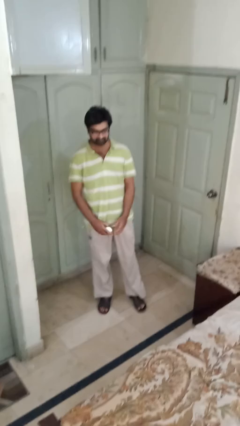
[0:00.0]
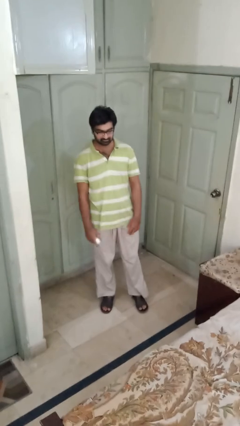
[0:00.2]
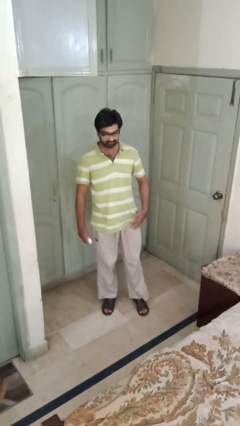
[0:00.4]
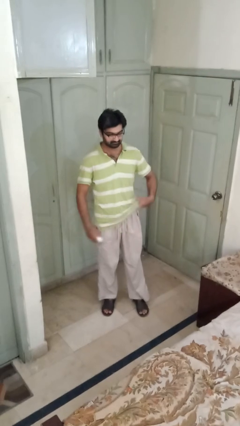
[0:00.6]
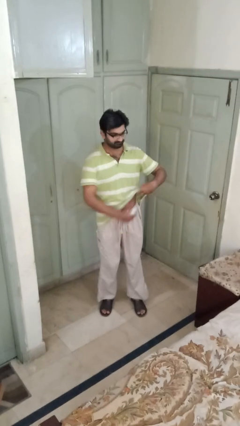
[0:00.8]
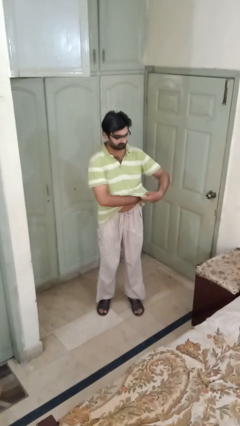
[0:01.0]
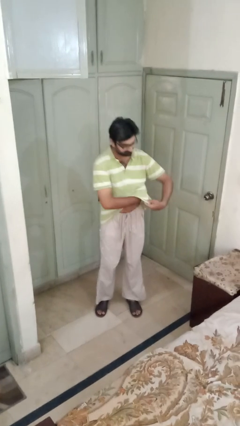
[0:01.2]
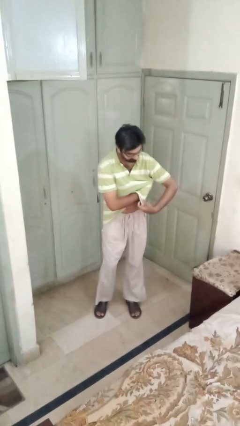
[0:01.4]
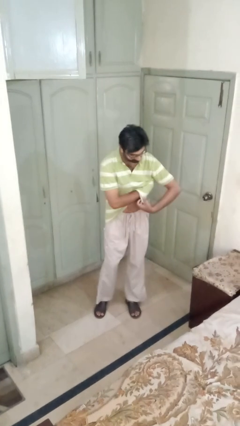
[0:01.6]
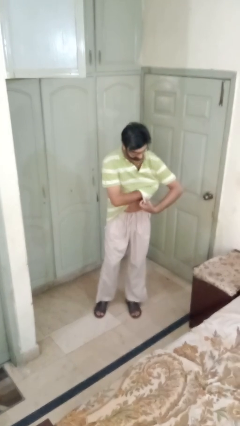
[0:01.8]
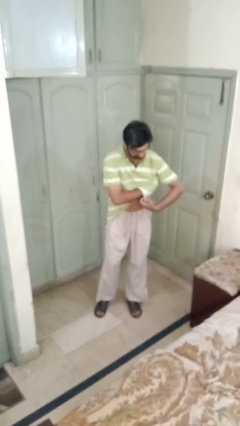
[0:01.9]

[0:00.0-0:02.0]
person applies deodorant

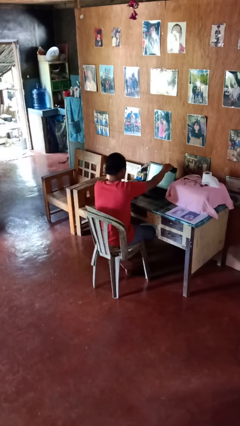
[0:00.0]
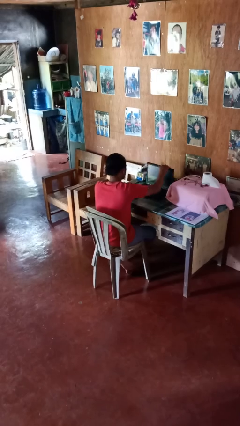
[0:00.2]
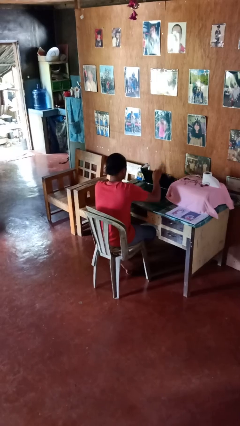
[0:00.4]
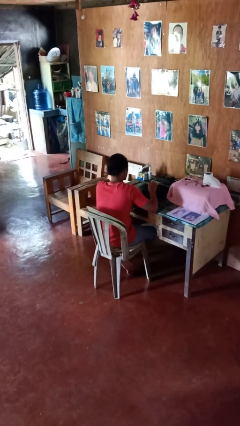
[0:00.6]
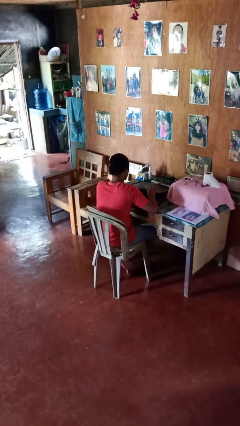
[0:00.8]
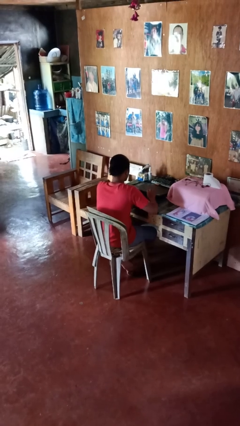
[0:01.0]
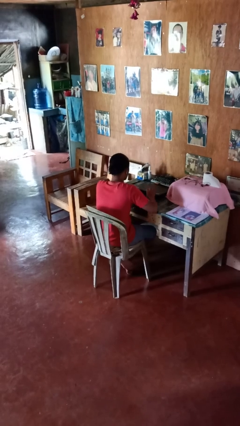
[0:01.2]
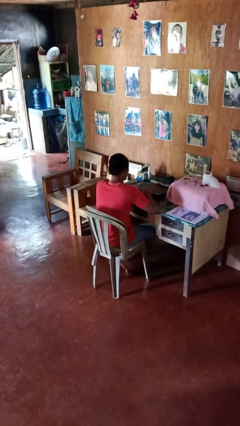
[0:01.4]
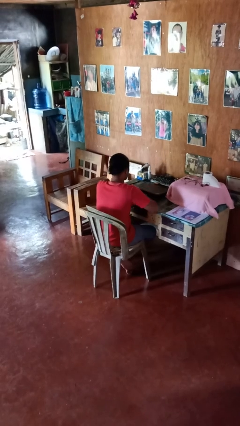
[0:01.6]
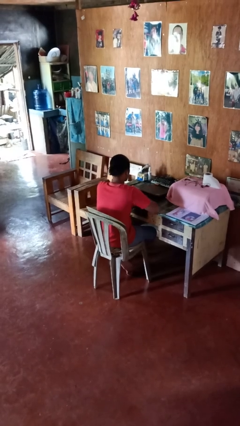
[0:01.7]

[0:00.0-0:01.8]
person closes laptop

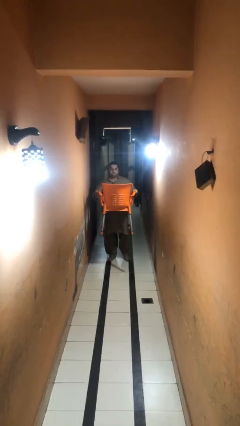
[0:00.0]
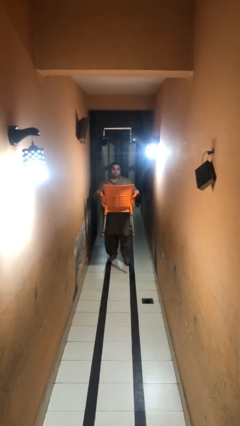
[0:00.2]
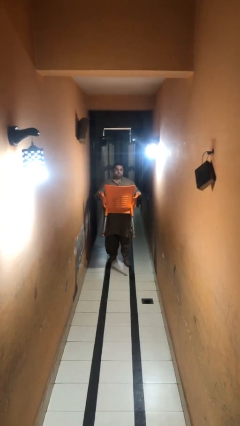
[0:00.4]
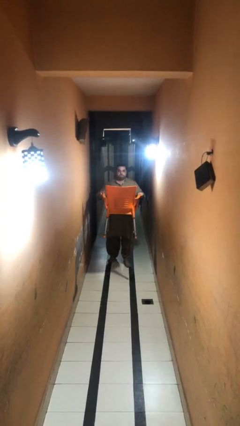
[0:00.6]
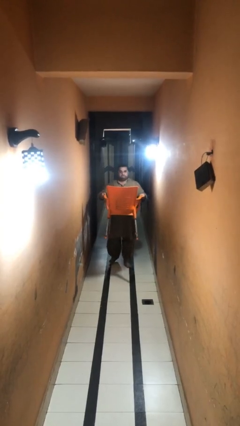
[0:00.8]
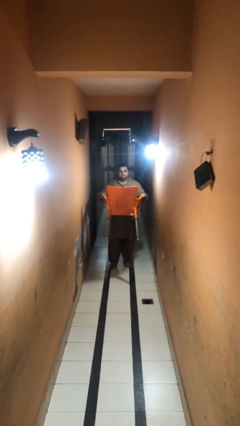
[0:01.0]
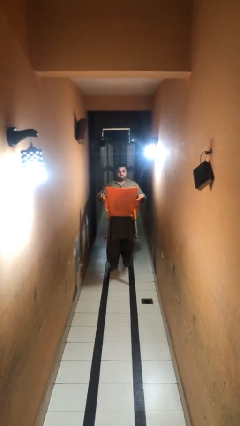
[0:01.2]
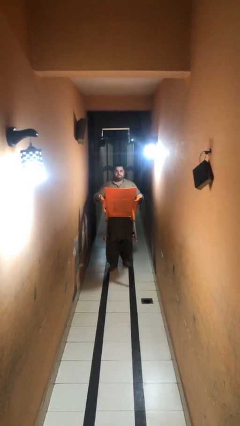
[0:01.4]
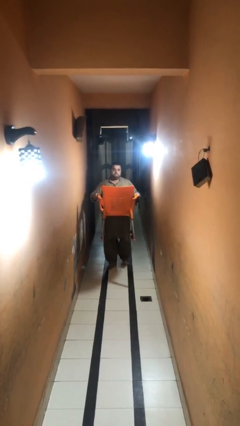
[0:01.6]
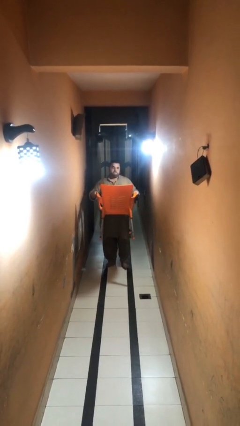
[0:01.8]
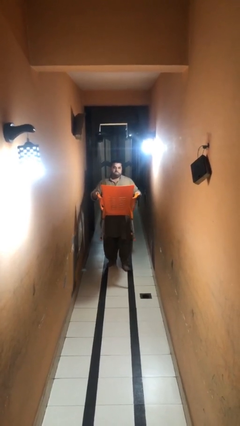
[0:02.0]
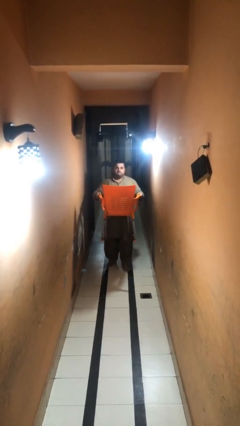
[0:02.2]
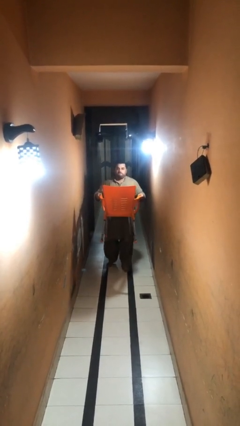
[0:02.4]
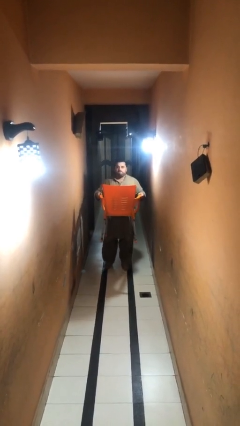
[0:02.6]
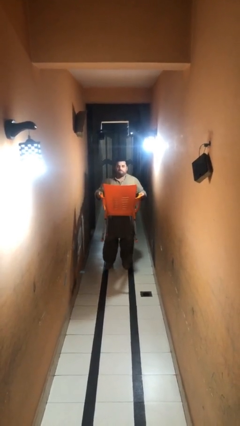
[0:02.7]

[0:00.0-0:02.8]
person carries furniture

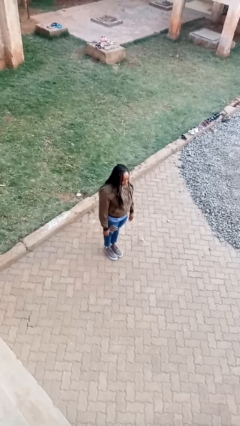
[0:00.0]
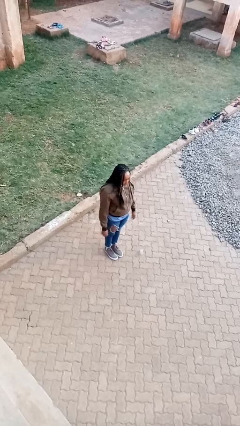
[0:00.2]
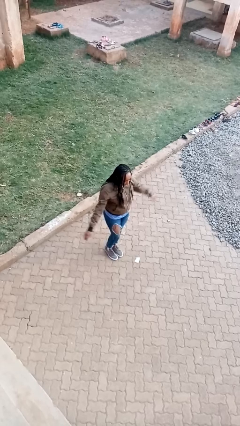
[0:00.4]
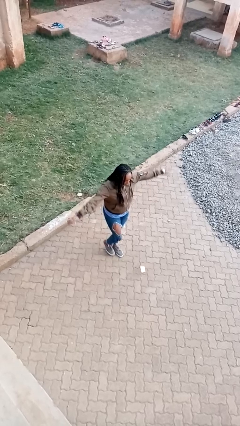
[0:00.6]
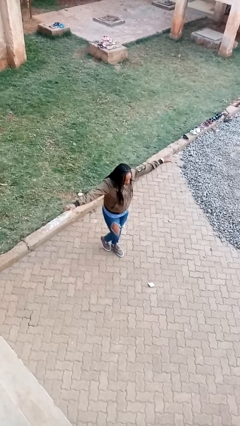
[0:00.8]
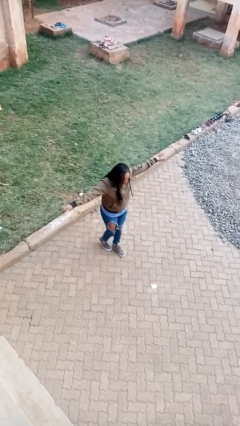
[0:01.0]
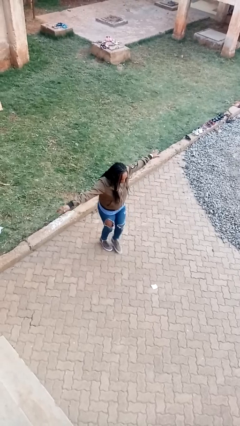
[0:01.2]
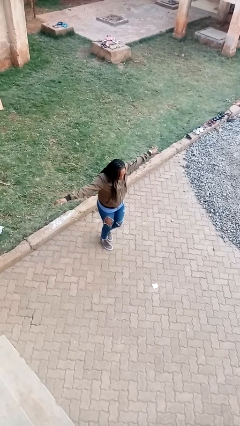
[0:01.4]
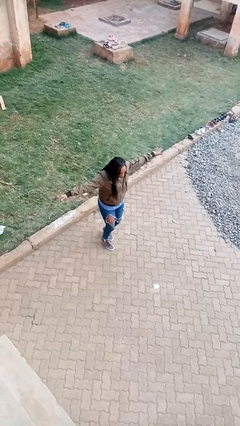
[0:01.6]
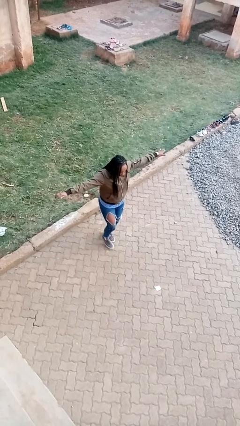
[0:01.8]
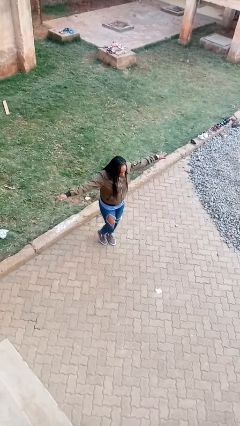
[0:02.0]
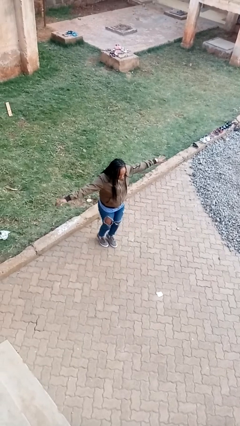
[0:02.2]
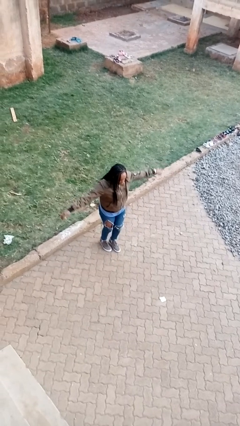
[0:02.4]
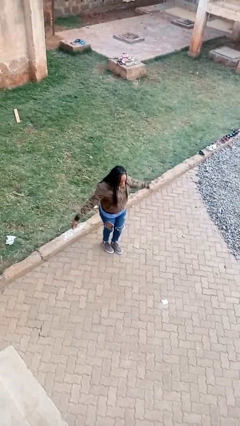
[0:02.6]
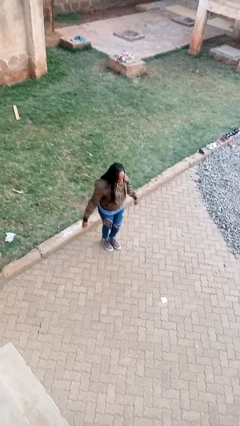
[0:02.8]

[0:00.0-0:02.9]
person walks tiptoe

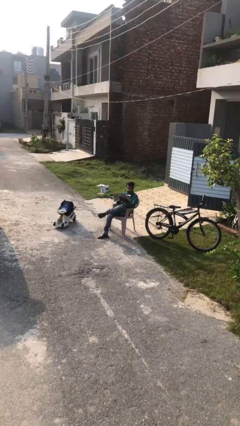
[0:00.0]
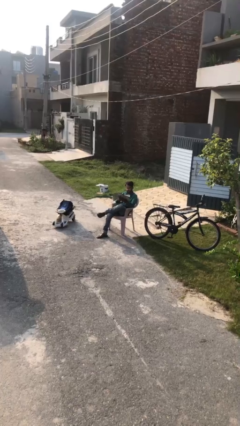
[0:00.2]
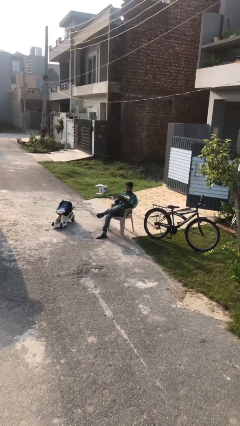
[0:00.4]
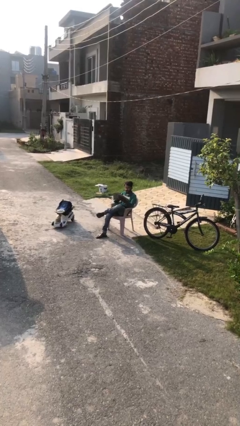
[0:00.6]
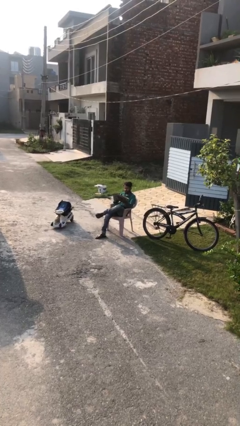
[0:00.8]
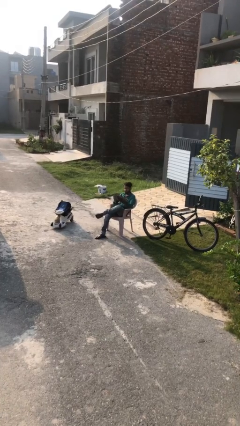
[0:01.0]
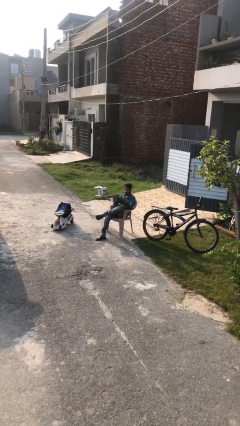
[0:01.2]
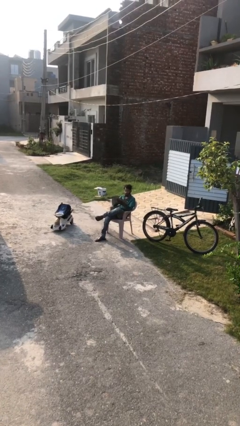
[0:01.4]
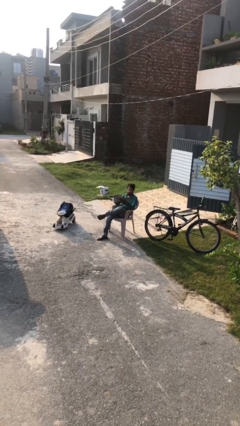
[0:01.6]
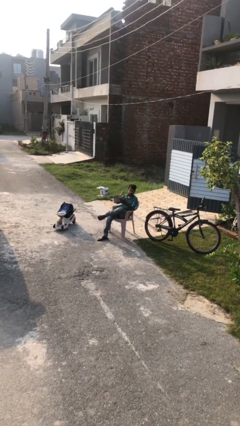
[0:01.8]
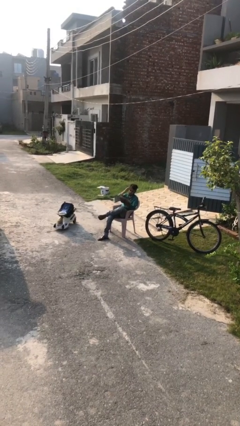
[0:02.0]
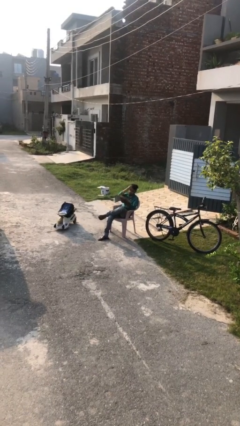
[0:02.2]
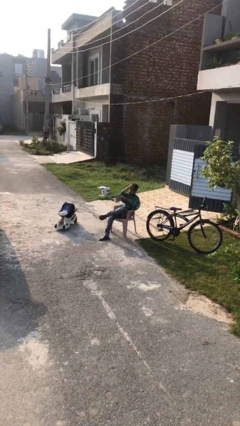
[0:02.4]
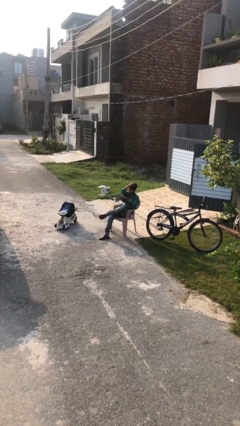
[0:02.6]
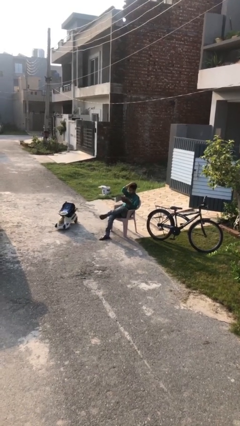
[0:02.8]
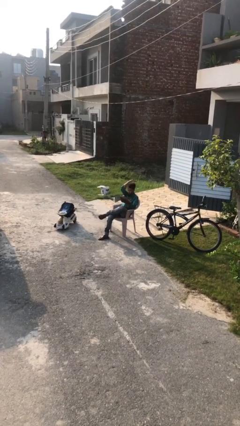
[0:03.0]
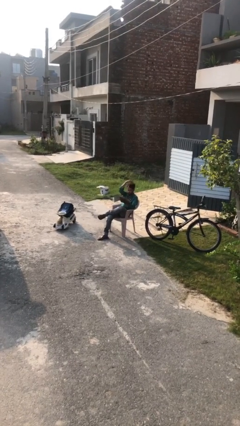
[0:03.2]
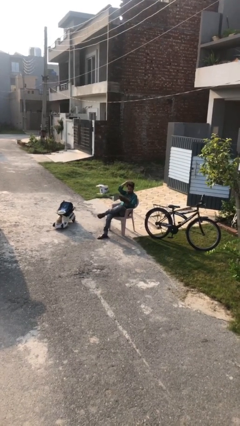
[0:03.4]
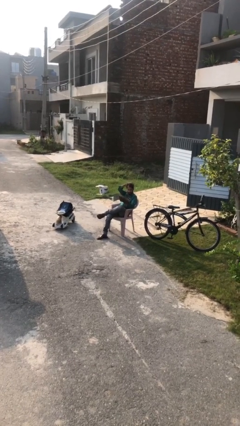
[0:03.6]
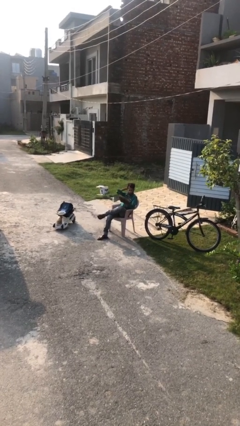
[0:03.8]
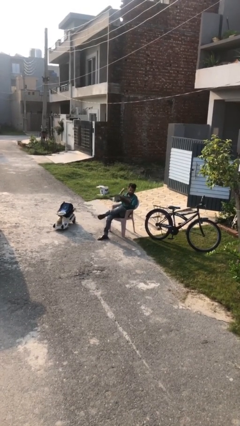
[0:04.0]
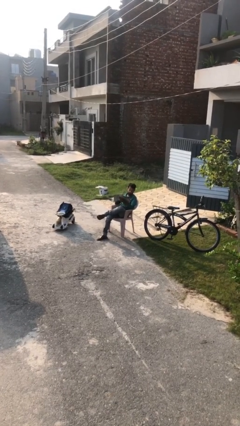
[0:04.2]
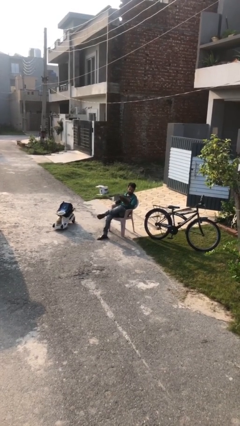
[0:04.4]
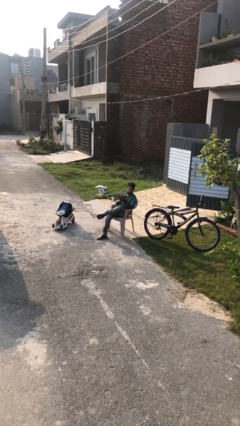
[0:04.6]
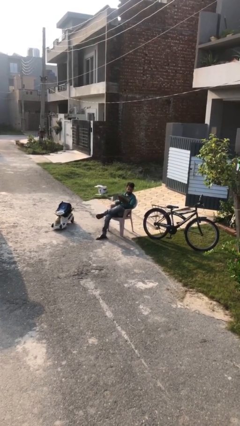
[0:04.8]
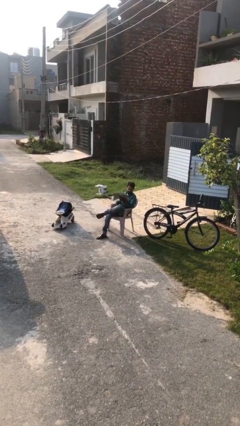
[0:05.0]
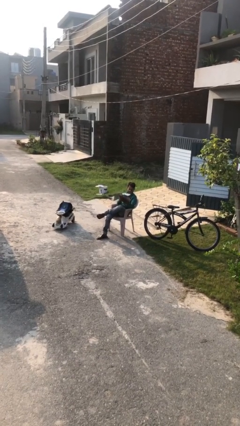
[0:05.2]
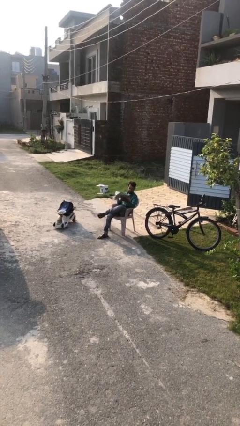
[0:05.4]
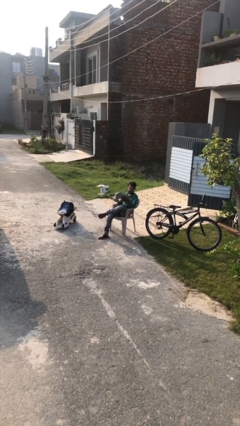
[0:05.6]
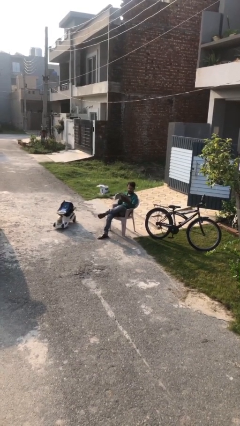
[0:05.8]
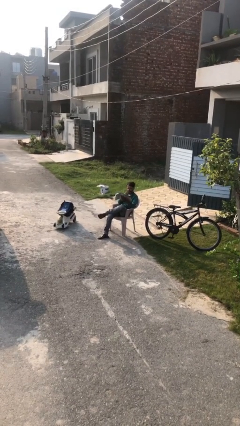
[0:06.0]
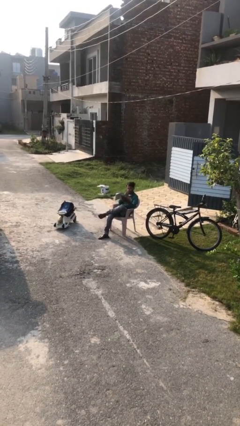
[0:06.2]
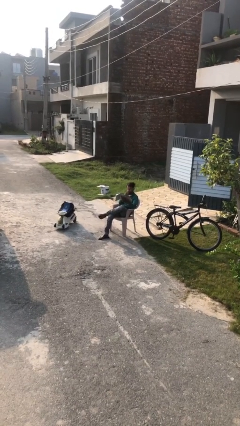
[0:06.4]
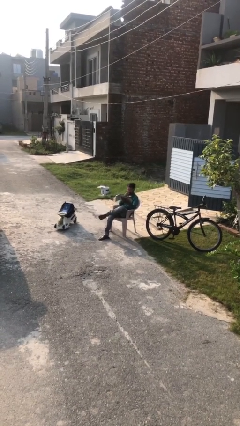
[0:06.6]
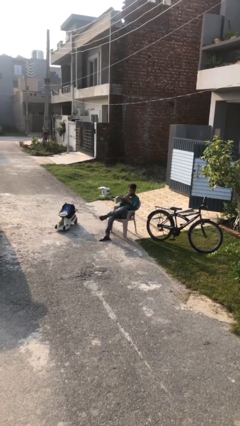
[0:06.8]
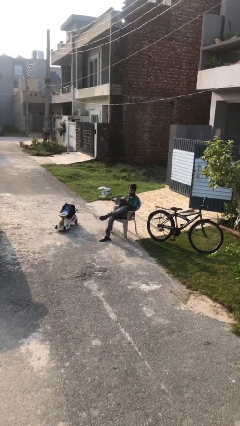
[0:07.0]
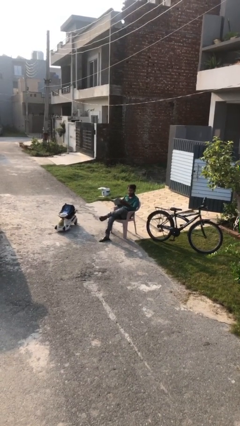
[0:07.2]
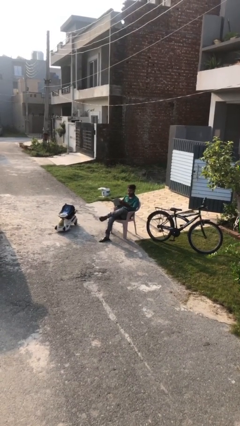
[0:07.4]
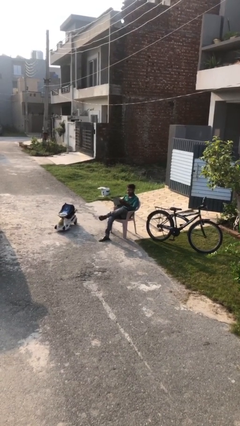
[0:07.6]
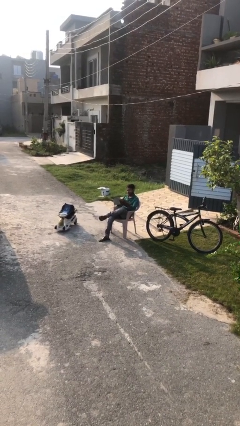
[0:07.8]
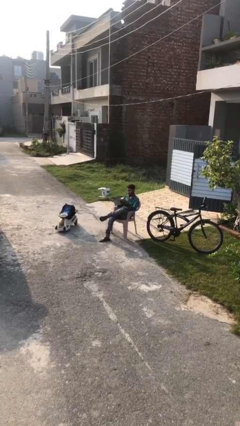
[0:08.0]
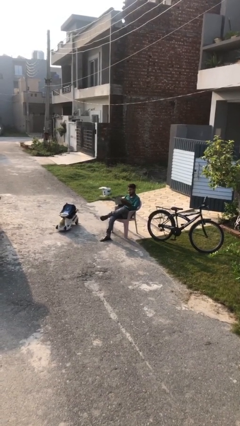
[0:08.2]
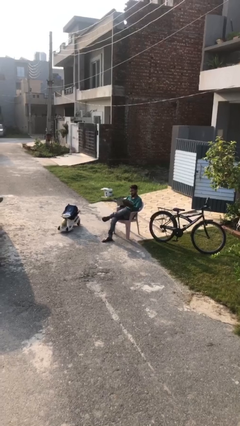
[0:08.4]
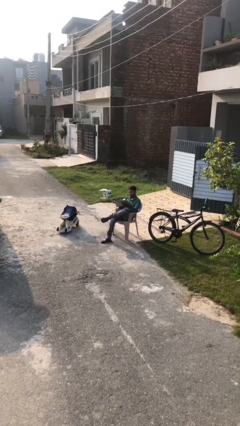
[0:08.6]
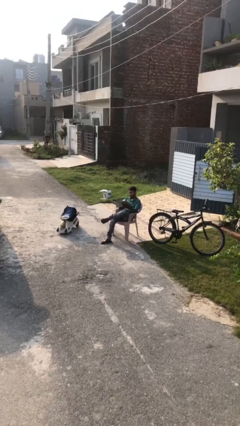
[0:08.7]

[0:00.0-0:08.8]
person reads document
